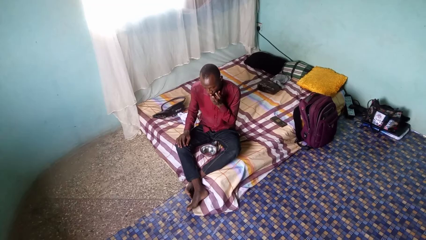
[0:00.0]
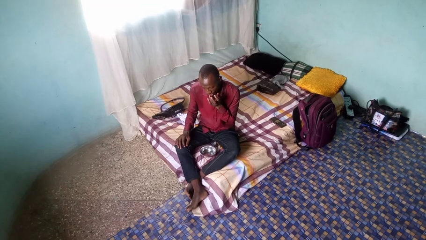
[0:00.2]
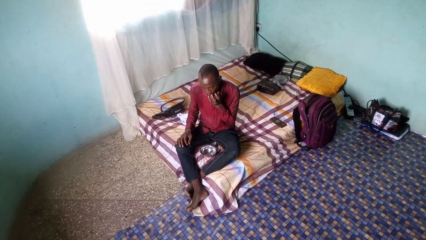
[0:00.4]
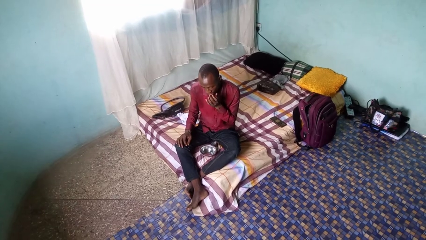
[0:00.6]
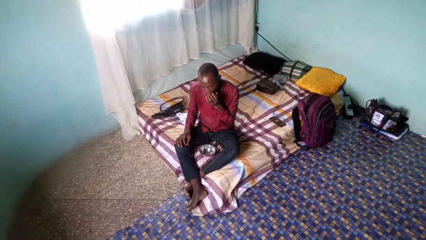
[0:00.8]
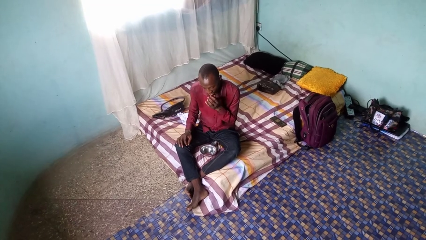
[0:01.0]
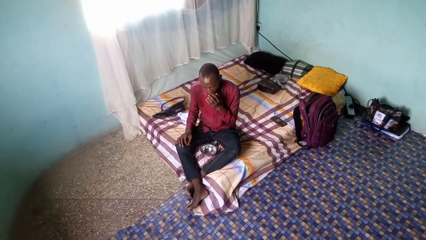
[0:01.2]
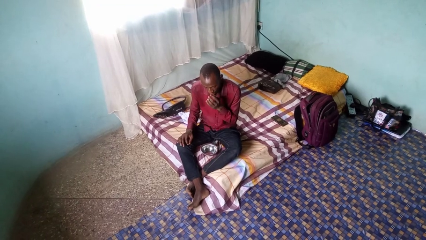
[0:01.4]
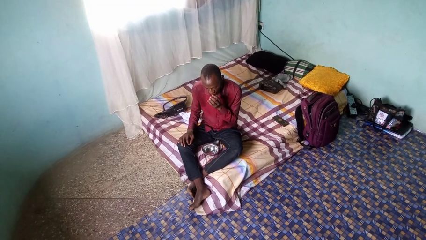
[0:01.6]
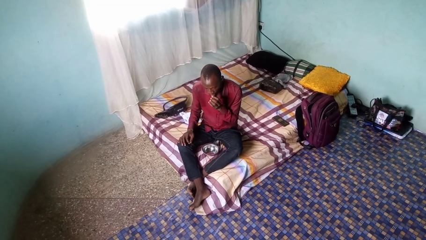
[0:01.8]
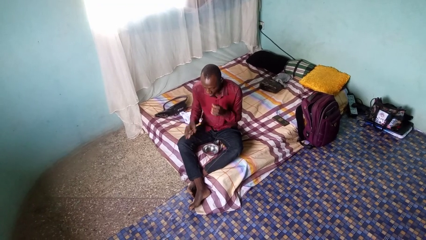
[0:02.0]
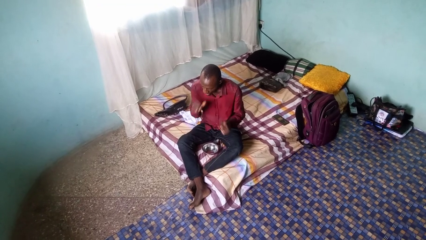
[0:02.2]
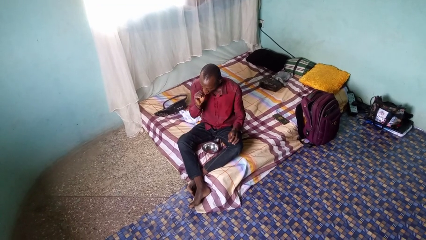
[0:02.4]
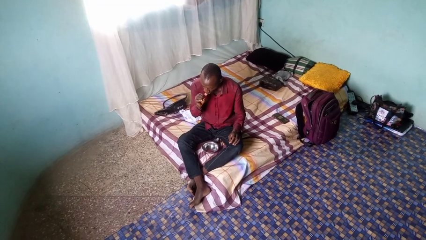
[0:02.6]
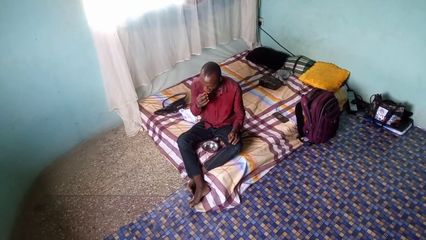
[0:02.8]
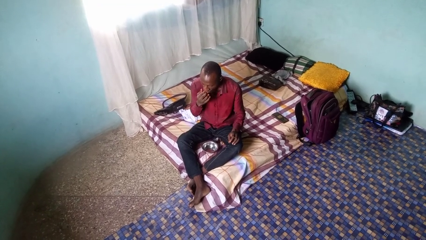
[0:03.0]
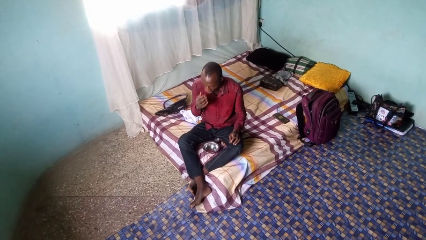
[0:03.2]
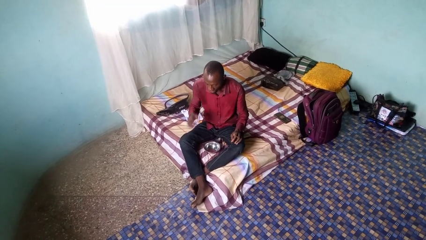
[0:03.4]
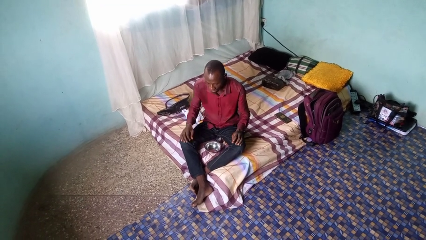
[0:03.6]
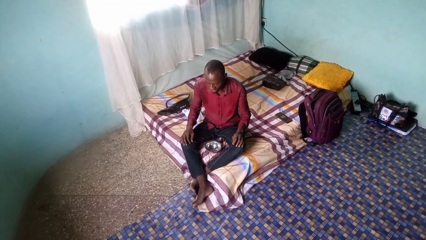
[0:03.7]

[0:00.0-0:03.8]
person licks fingers

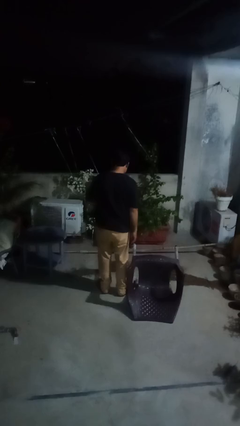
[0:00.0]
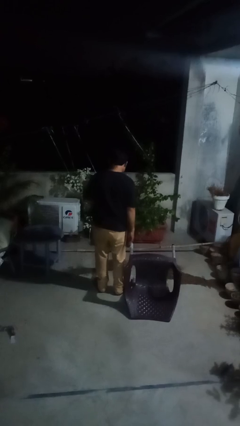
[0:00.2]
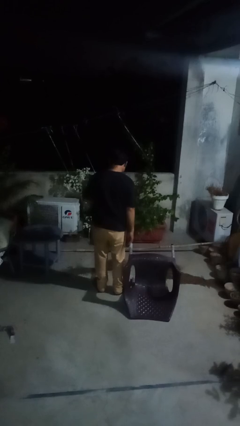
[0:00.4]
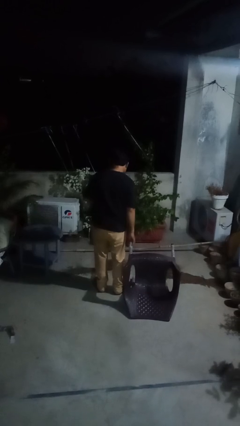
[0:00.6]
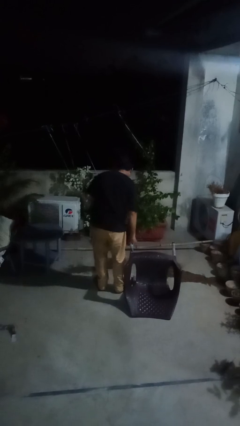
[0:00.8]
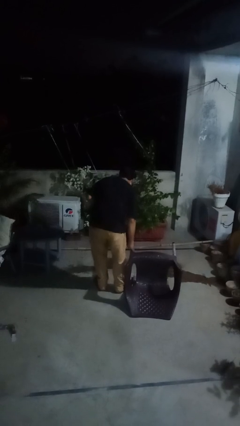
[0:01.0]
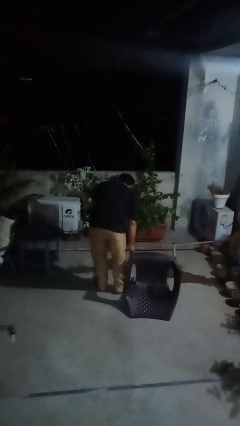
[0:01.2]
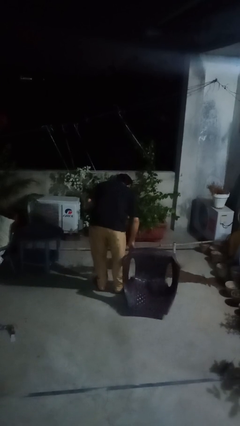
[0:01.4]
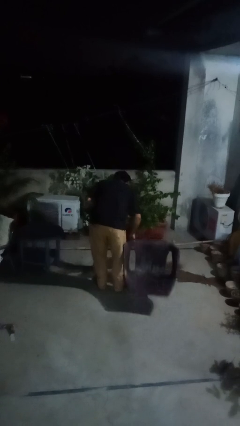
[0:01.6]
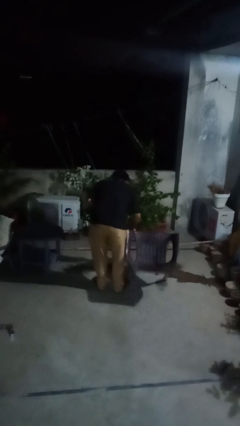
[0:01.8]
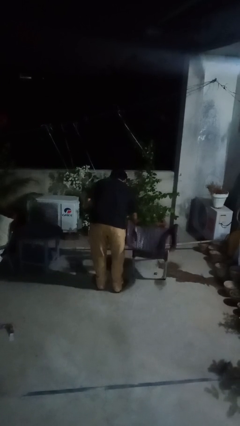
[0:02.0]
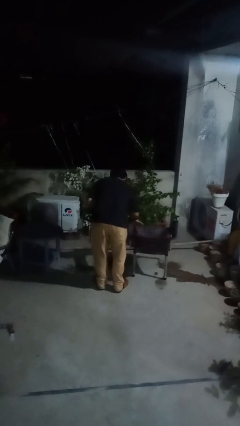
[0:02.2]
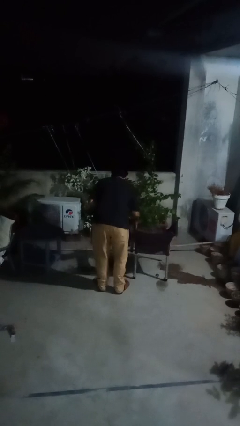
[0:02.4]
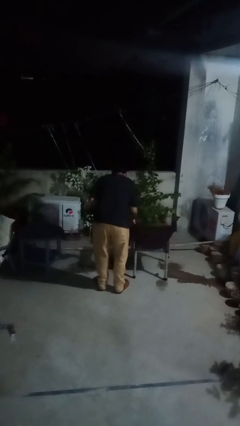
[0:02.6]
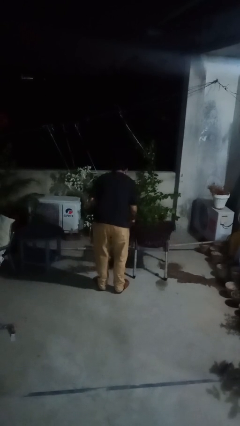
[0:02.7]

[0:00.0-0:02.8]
person sets upright furniture

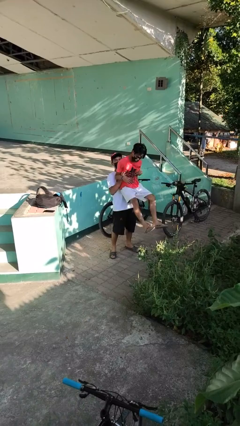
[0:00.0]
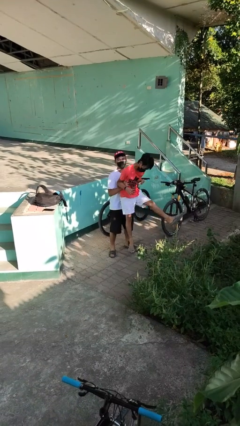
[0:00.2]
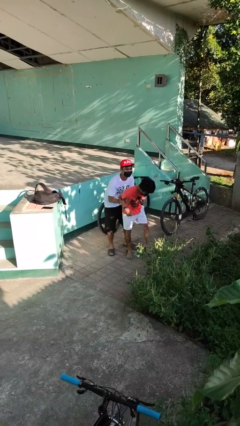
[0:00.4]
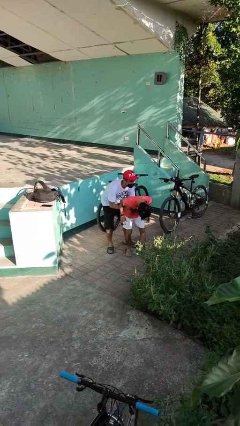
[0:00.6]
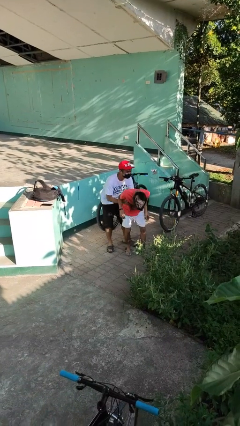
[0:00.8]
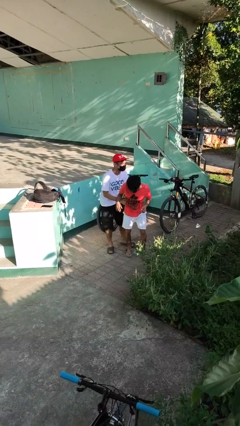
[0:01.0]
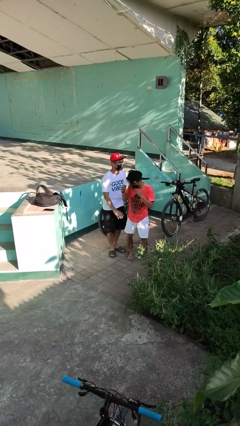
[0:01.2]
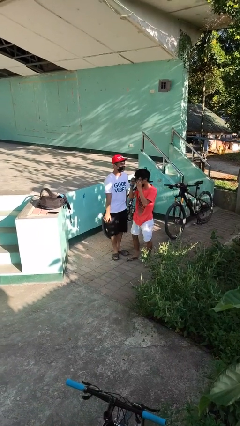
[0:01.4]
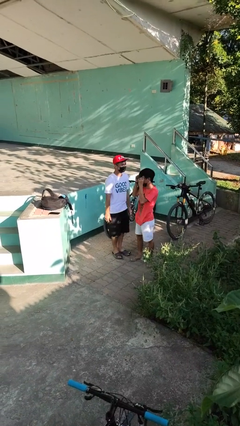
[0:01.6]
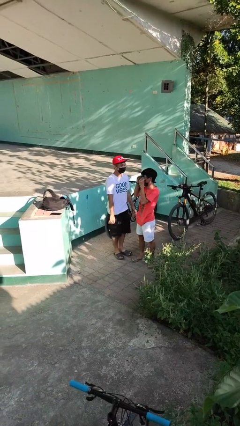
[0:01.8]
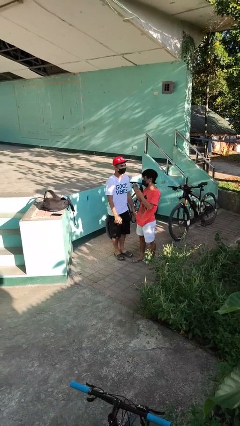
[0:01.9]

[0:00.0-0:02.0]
person puts down person

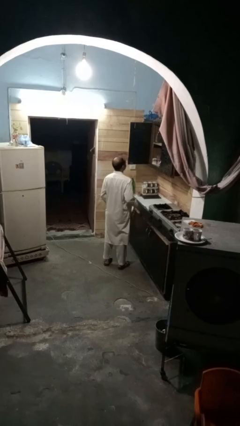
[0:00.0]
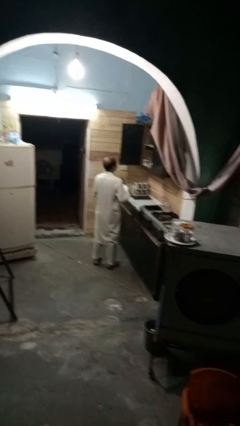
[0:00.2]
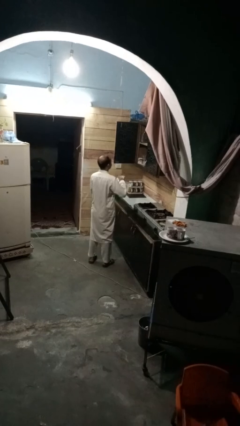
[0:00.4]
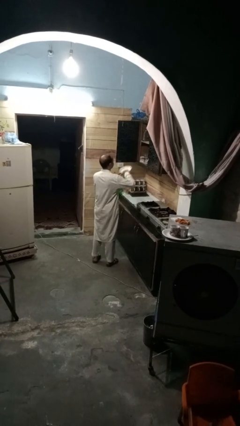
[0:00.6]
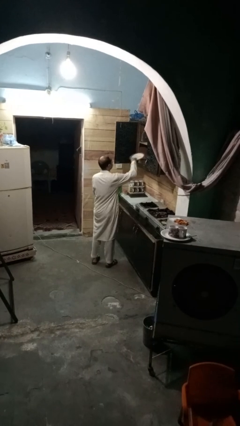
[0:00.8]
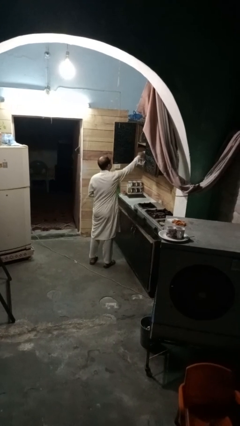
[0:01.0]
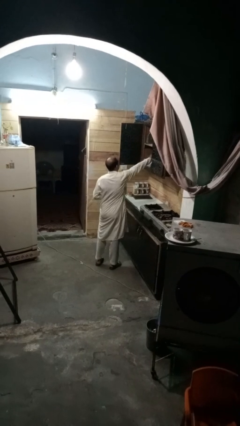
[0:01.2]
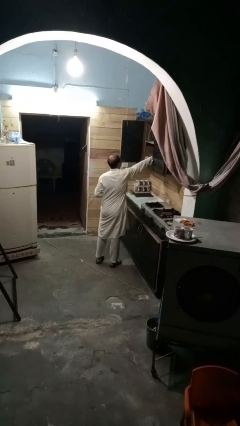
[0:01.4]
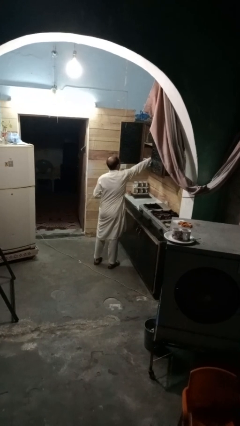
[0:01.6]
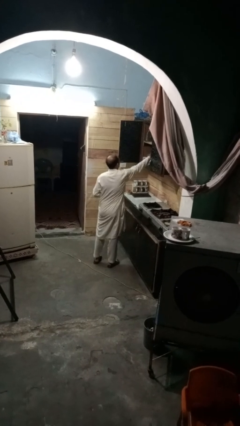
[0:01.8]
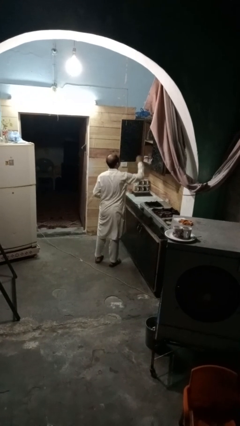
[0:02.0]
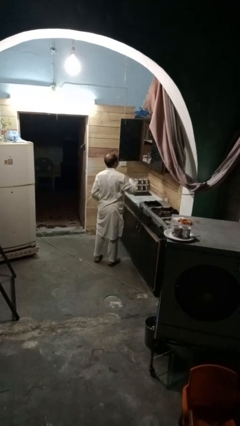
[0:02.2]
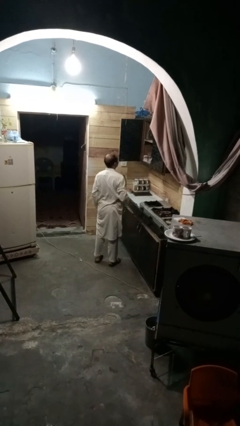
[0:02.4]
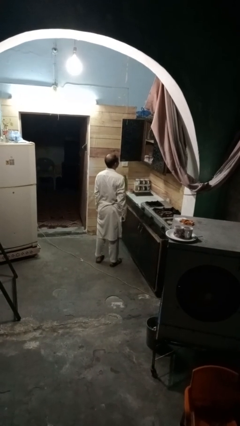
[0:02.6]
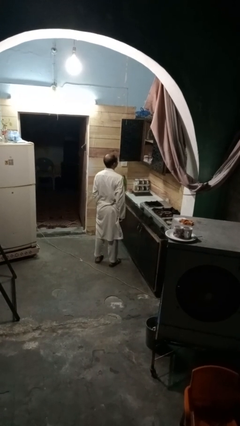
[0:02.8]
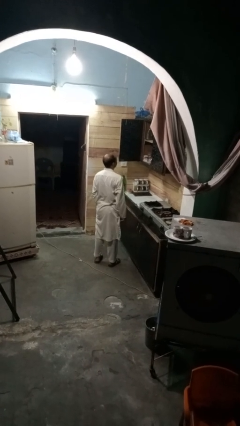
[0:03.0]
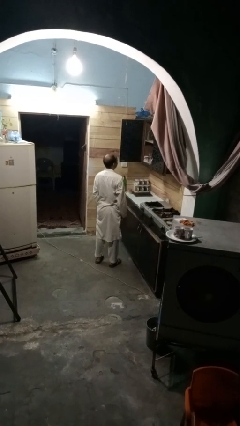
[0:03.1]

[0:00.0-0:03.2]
person puts object in cabinet

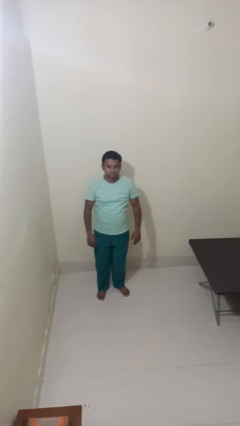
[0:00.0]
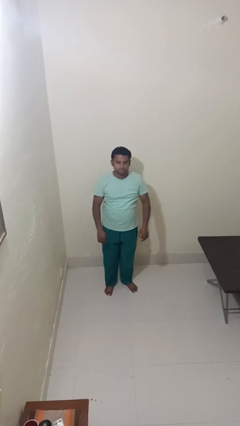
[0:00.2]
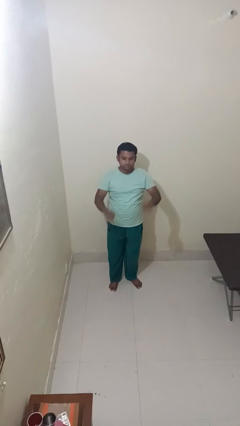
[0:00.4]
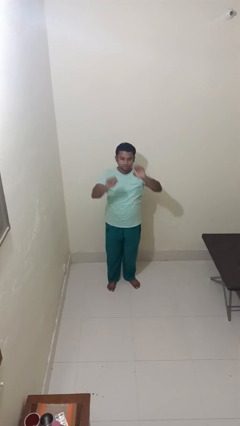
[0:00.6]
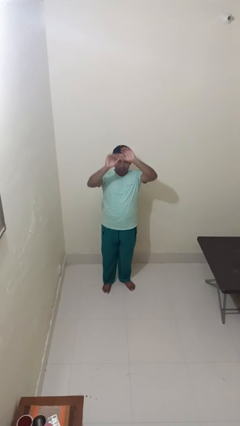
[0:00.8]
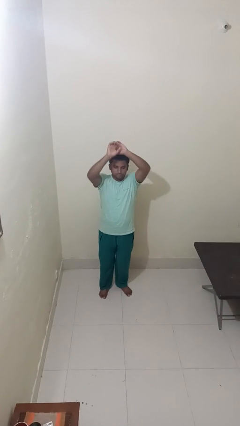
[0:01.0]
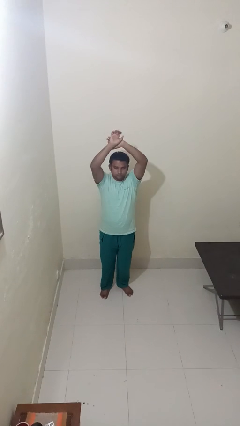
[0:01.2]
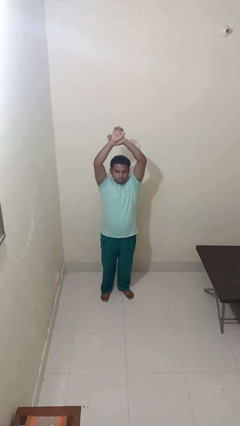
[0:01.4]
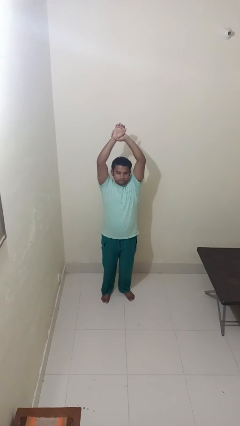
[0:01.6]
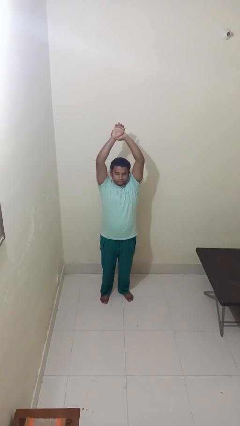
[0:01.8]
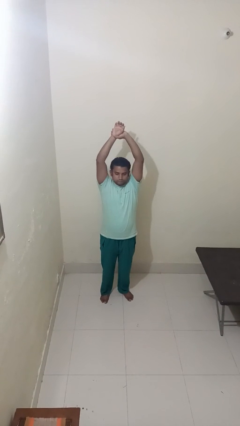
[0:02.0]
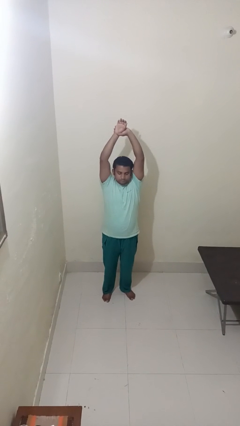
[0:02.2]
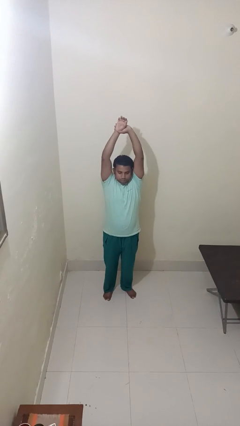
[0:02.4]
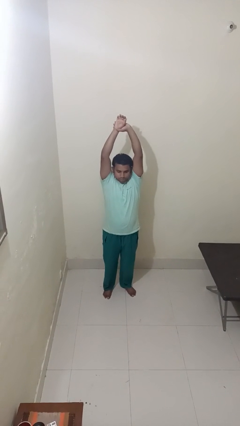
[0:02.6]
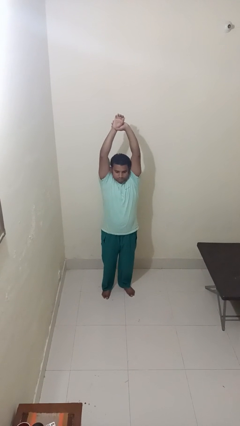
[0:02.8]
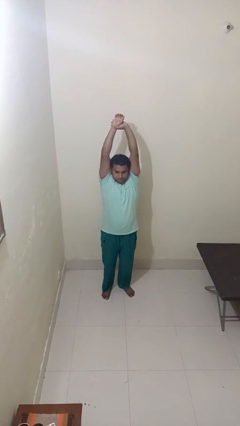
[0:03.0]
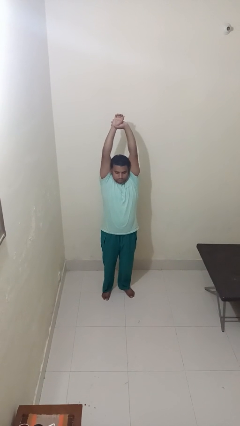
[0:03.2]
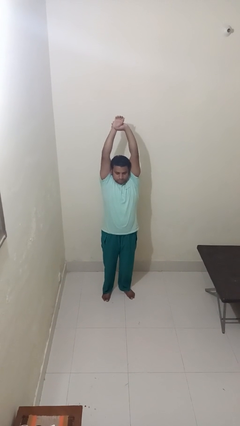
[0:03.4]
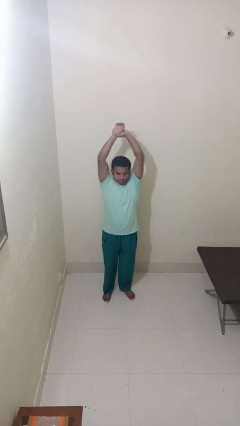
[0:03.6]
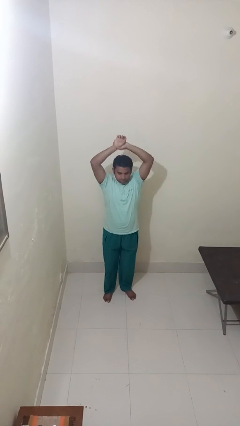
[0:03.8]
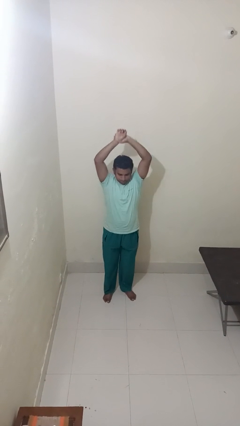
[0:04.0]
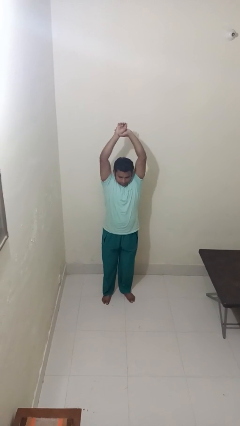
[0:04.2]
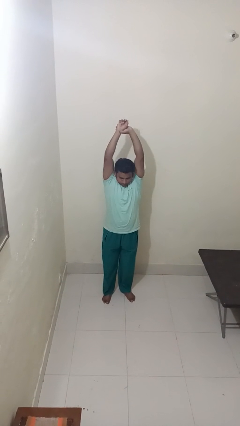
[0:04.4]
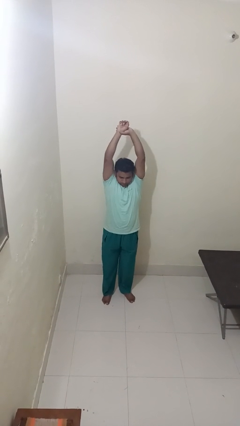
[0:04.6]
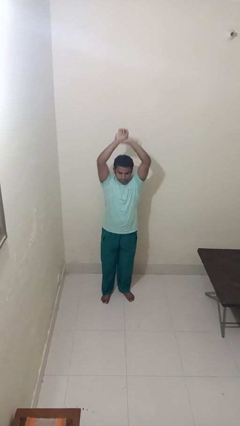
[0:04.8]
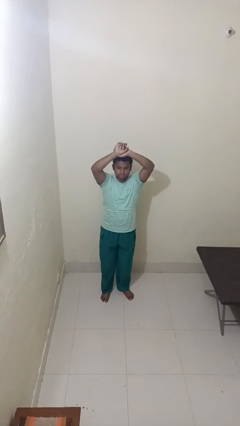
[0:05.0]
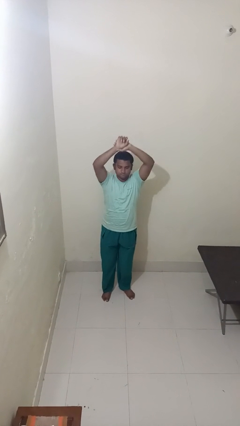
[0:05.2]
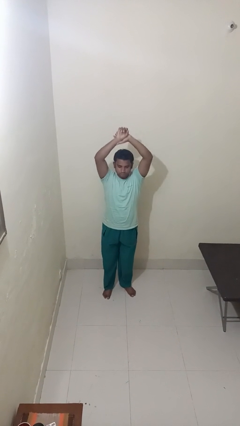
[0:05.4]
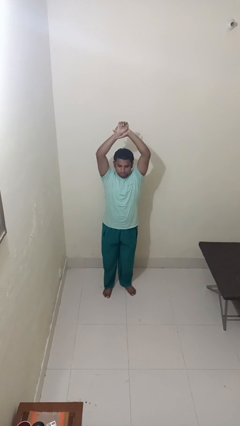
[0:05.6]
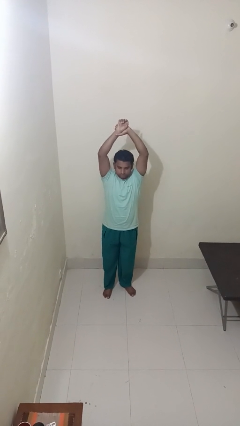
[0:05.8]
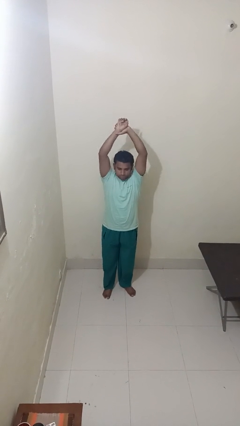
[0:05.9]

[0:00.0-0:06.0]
person stretches arms over head
